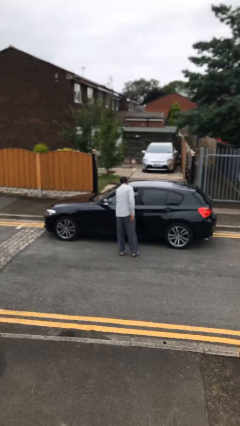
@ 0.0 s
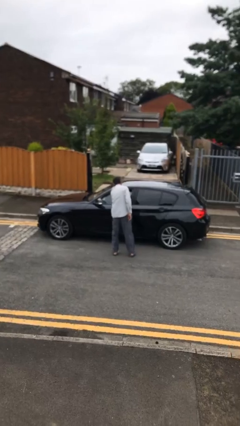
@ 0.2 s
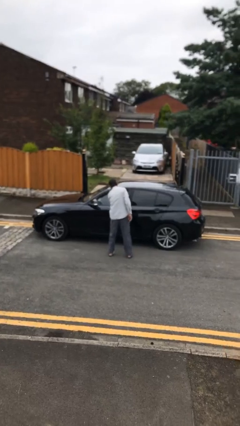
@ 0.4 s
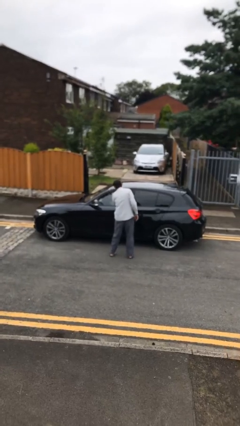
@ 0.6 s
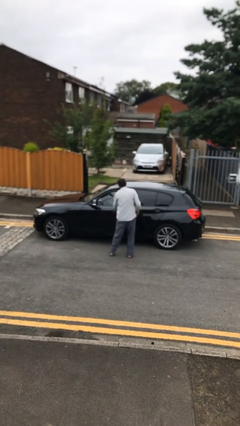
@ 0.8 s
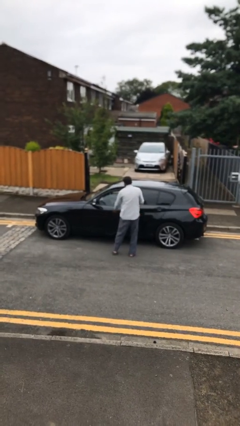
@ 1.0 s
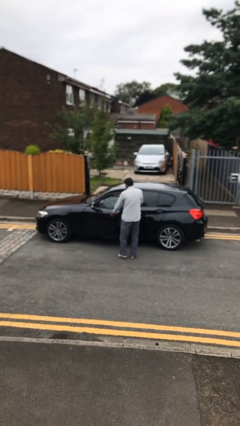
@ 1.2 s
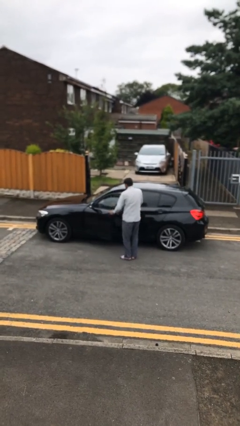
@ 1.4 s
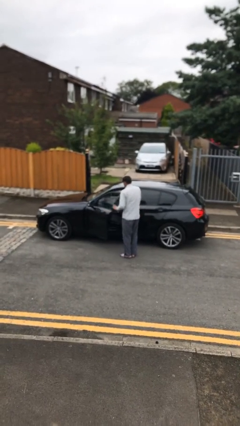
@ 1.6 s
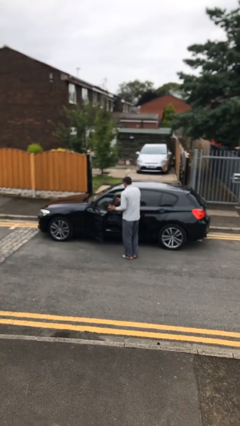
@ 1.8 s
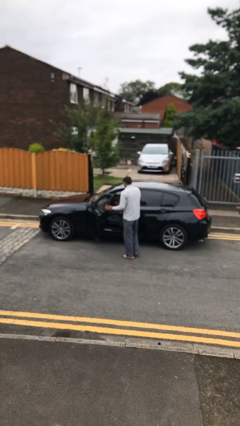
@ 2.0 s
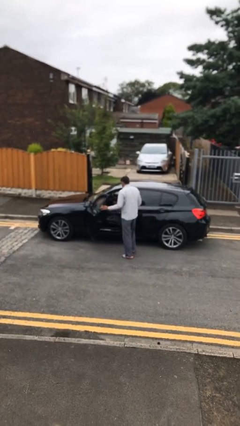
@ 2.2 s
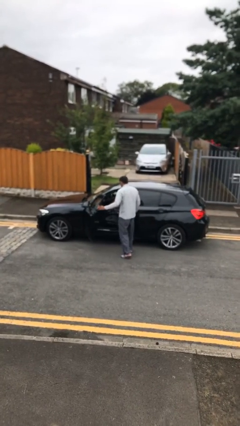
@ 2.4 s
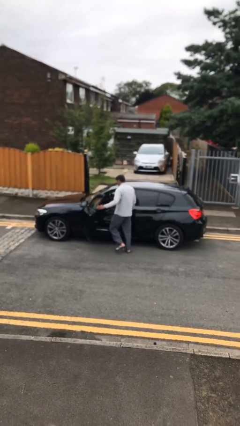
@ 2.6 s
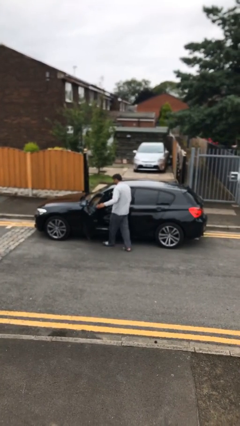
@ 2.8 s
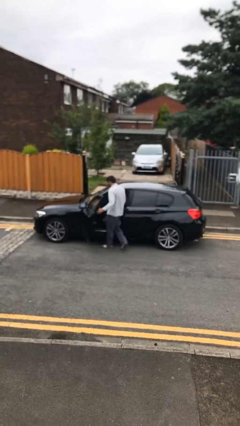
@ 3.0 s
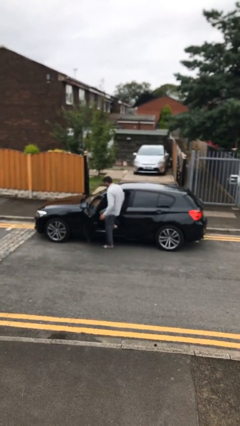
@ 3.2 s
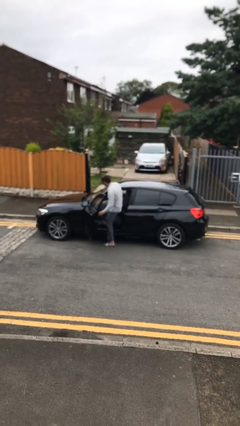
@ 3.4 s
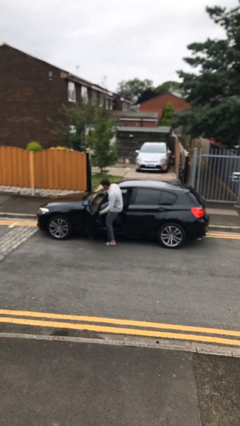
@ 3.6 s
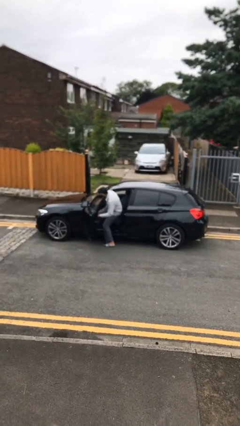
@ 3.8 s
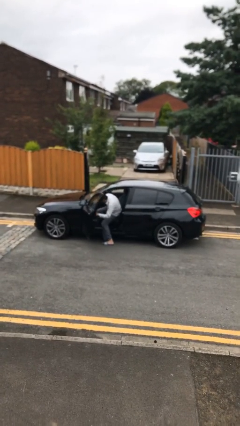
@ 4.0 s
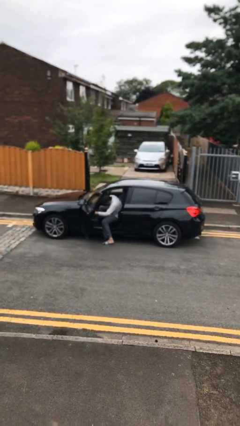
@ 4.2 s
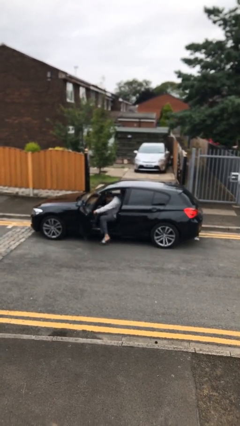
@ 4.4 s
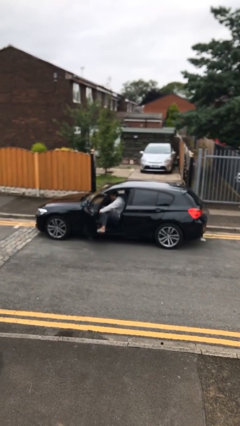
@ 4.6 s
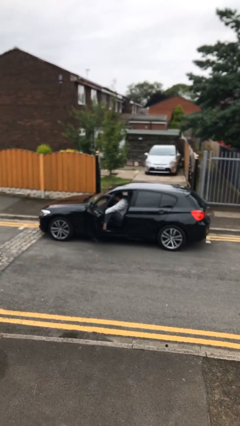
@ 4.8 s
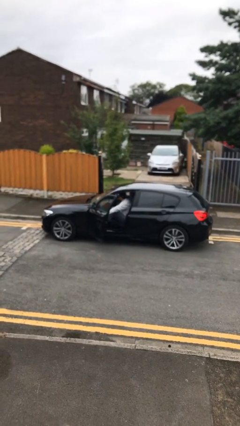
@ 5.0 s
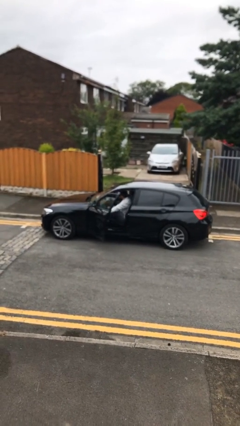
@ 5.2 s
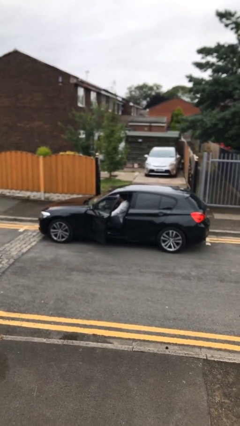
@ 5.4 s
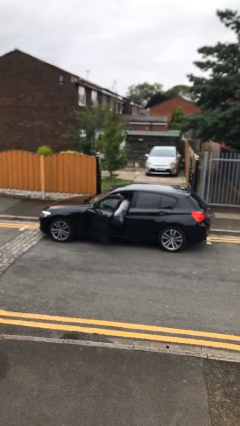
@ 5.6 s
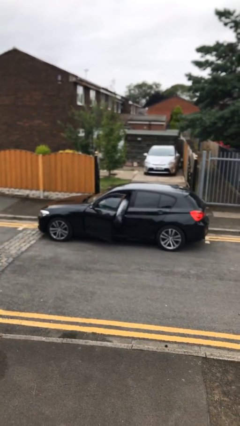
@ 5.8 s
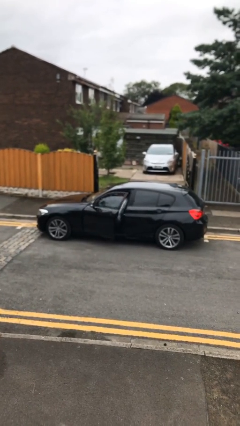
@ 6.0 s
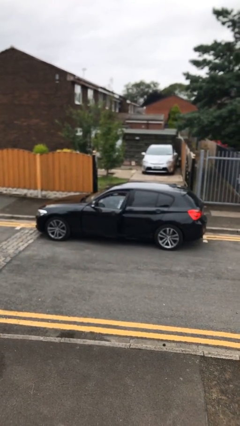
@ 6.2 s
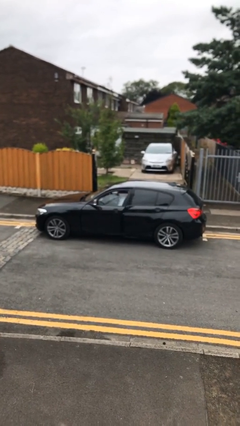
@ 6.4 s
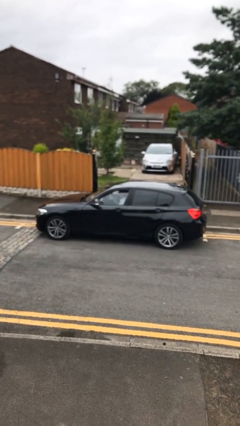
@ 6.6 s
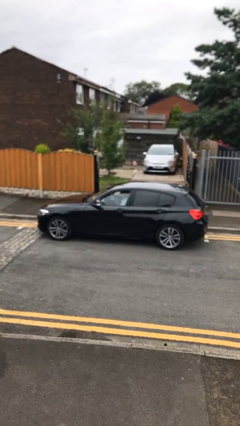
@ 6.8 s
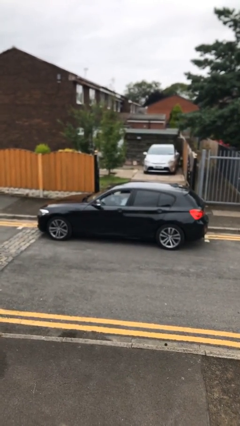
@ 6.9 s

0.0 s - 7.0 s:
car picks up person

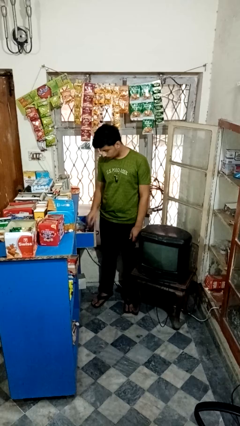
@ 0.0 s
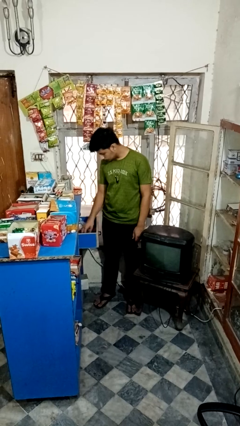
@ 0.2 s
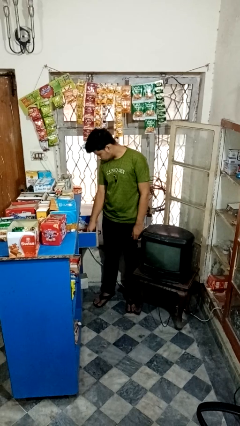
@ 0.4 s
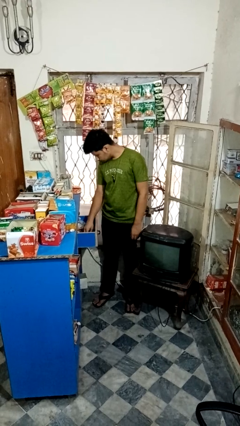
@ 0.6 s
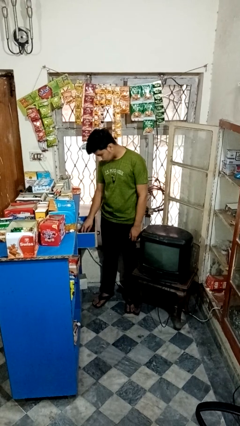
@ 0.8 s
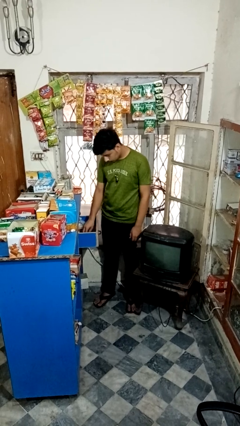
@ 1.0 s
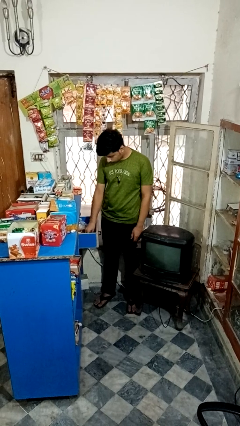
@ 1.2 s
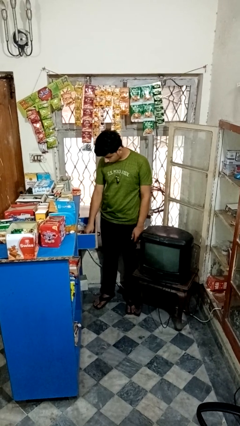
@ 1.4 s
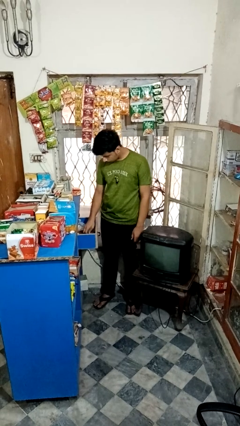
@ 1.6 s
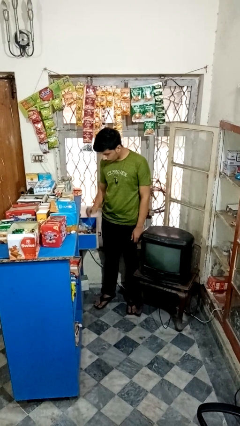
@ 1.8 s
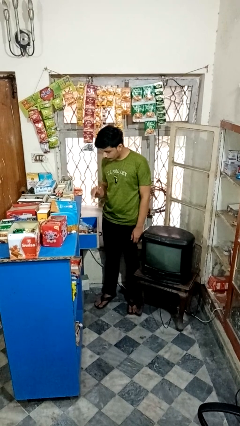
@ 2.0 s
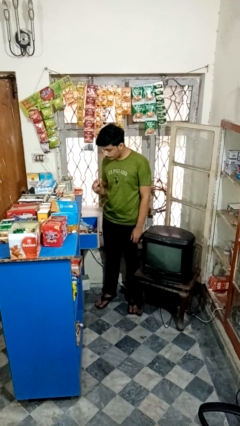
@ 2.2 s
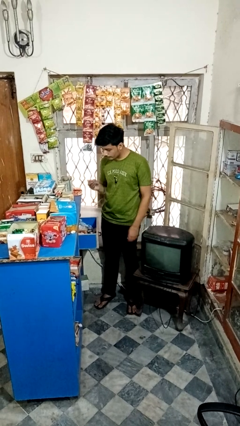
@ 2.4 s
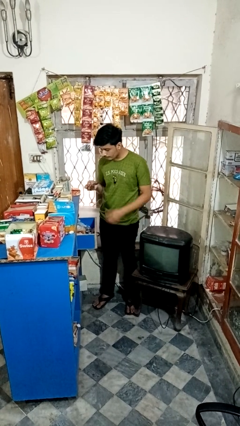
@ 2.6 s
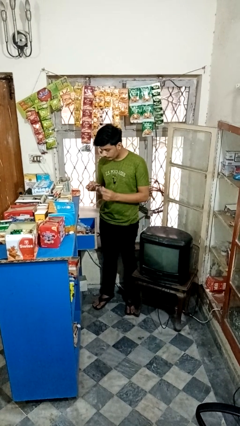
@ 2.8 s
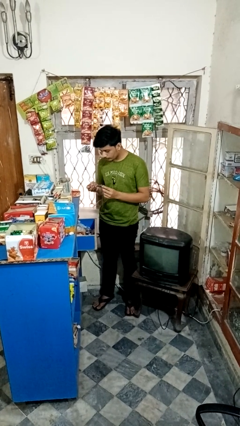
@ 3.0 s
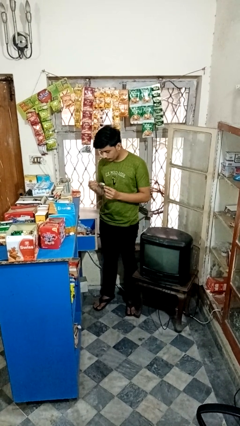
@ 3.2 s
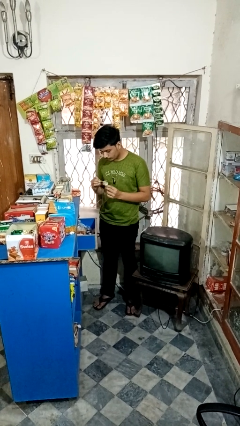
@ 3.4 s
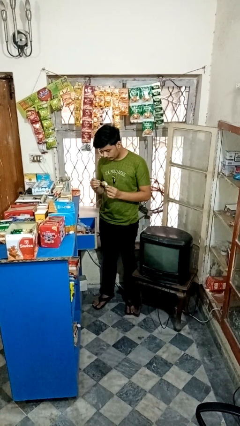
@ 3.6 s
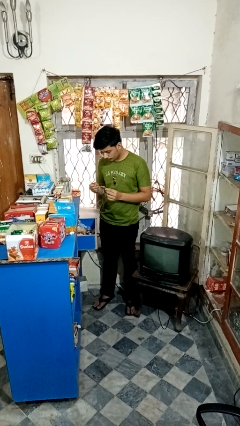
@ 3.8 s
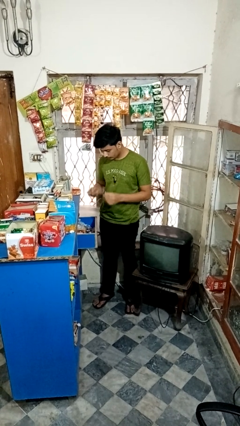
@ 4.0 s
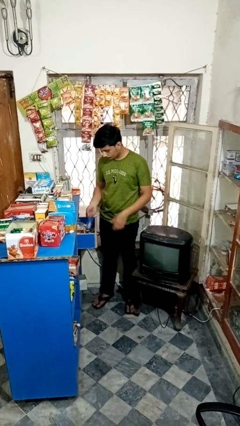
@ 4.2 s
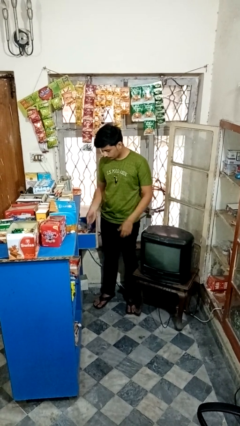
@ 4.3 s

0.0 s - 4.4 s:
person searches in kitchen drawer

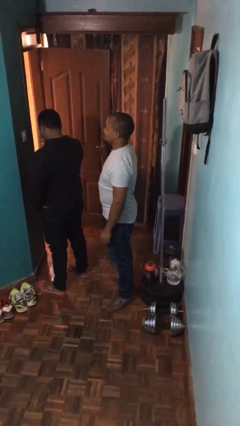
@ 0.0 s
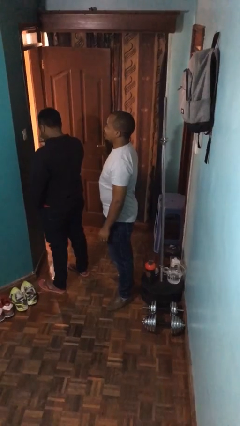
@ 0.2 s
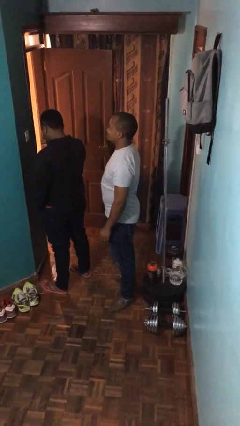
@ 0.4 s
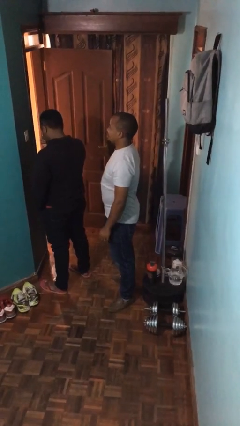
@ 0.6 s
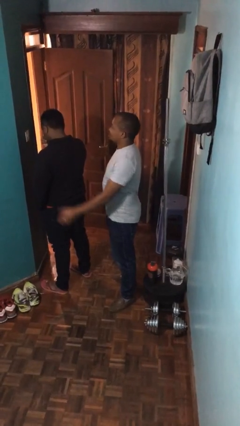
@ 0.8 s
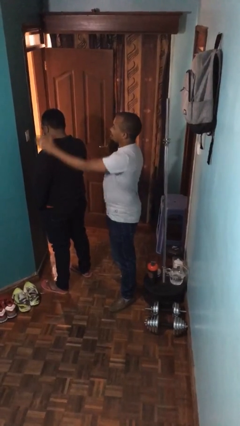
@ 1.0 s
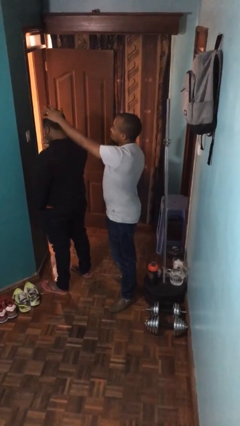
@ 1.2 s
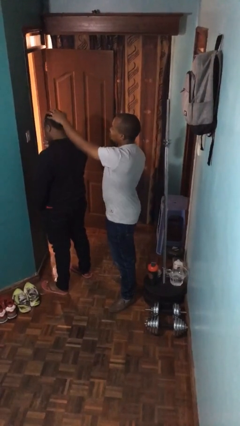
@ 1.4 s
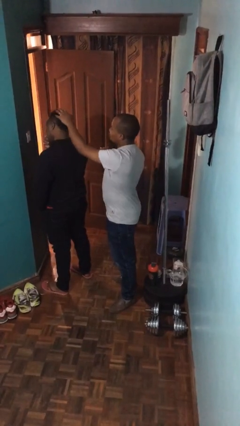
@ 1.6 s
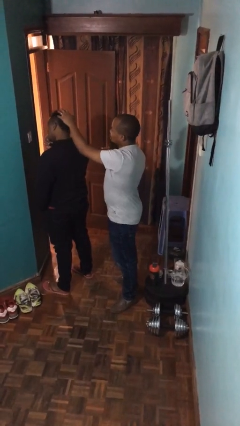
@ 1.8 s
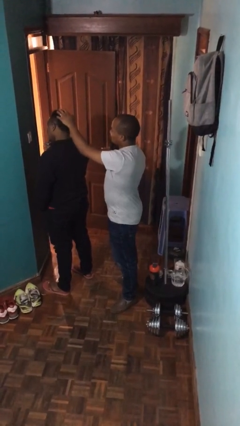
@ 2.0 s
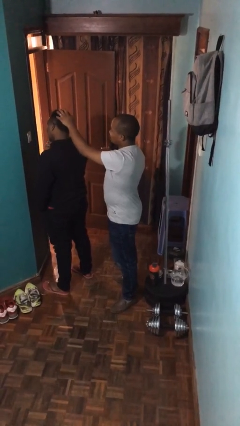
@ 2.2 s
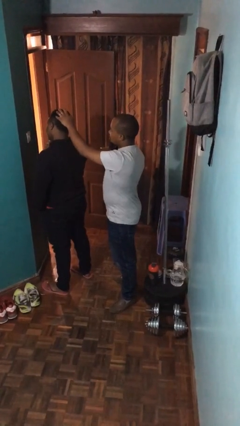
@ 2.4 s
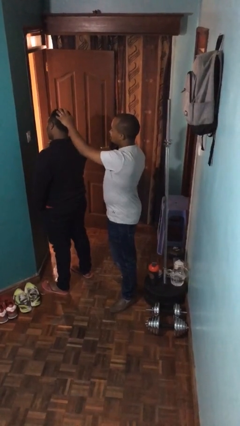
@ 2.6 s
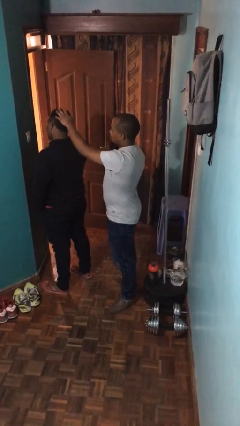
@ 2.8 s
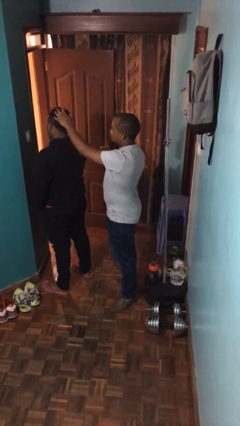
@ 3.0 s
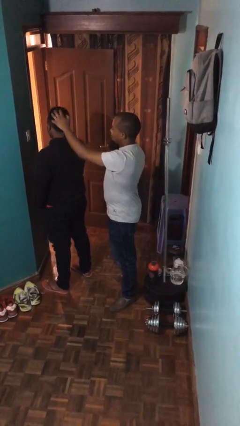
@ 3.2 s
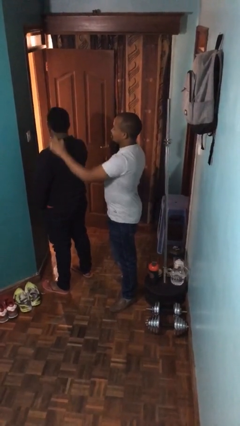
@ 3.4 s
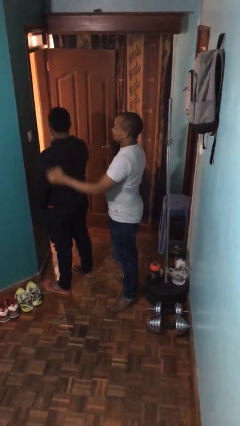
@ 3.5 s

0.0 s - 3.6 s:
person grabs person by hair

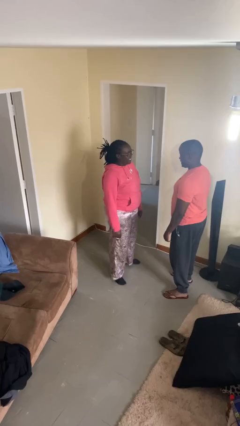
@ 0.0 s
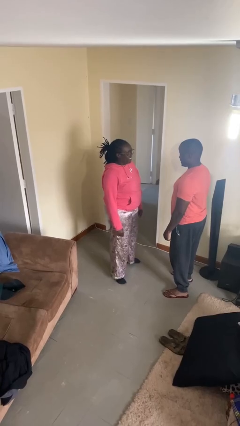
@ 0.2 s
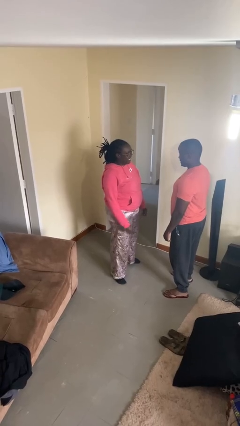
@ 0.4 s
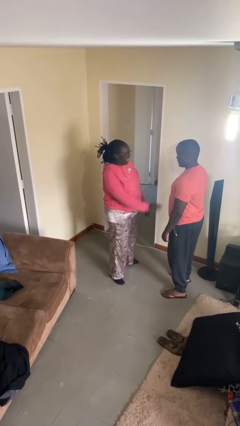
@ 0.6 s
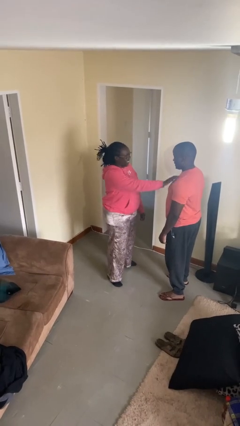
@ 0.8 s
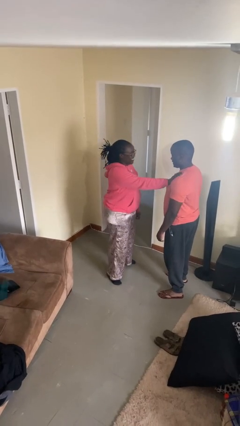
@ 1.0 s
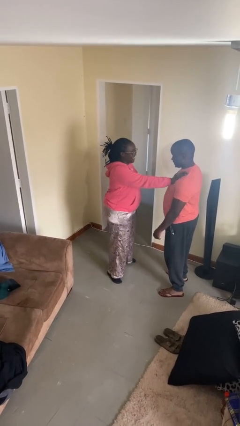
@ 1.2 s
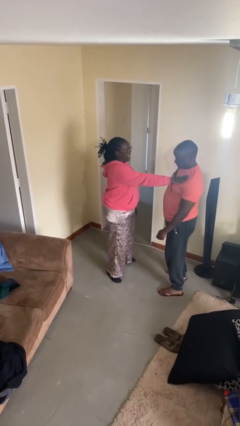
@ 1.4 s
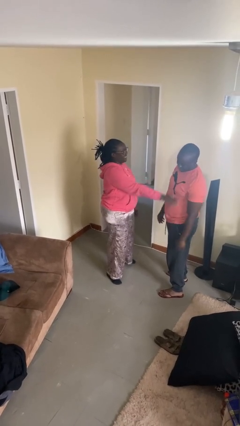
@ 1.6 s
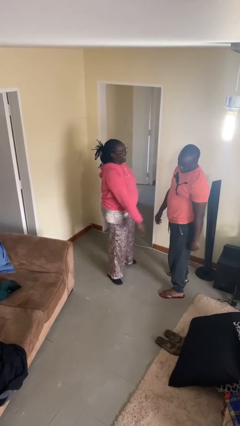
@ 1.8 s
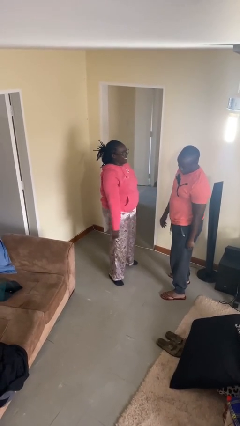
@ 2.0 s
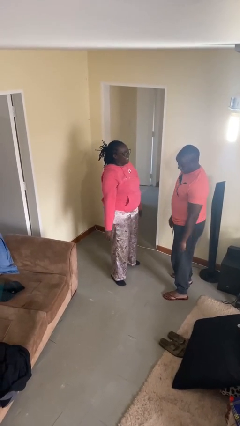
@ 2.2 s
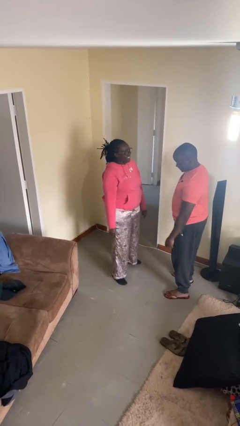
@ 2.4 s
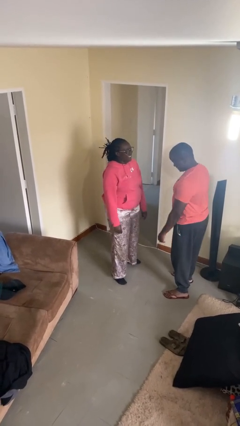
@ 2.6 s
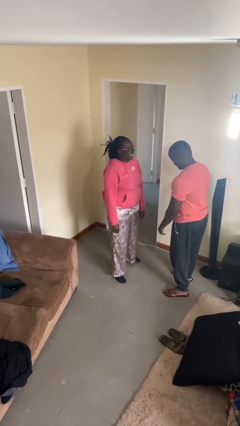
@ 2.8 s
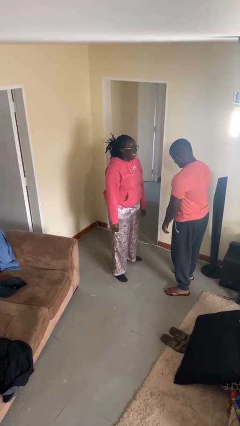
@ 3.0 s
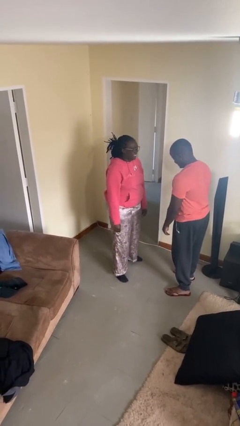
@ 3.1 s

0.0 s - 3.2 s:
person shoves person
